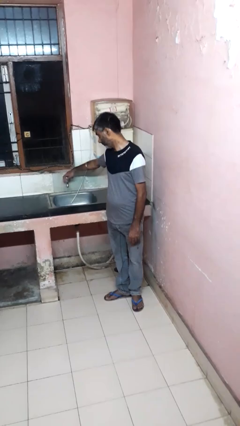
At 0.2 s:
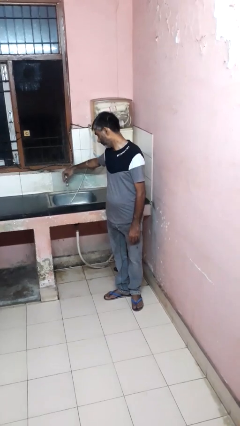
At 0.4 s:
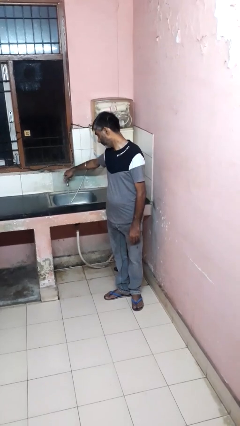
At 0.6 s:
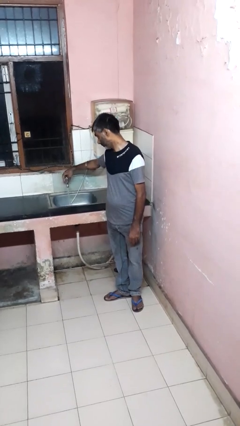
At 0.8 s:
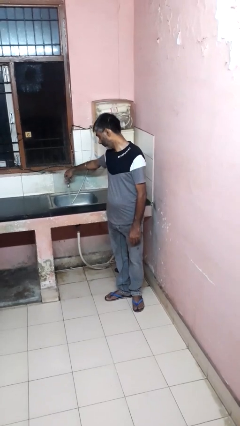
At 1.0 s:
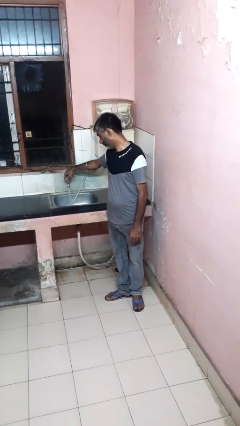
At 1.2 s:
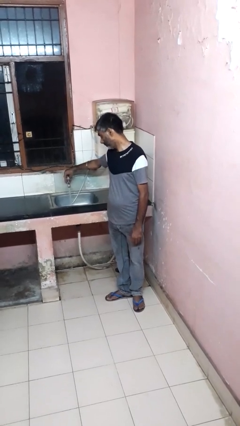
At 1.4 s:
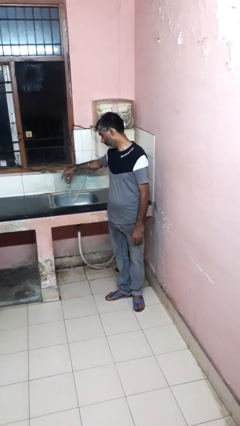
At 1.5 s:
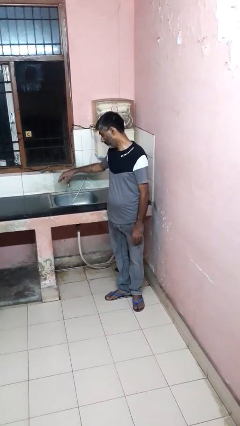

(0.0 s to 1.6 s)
person turns on faucet

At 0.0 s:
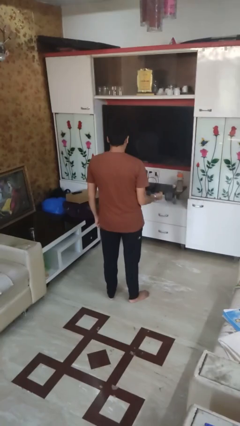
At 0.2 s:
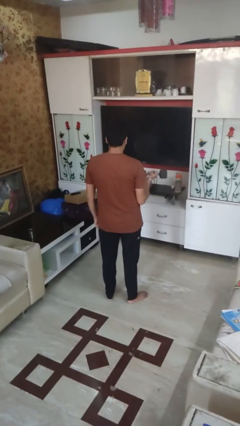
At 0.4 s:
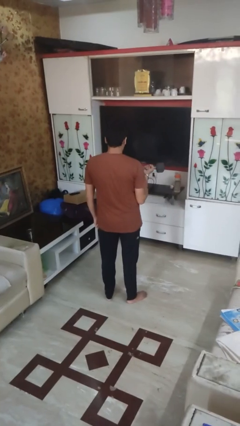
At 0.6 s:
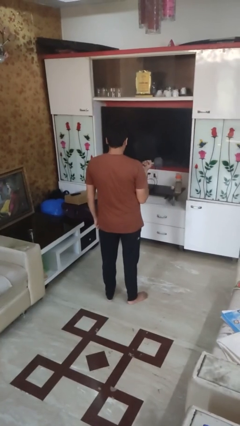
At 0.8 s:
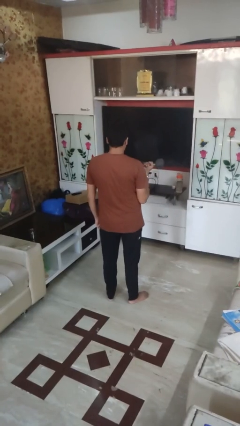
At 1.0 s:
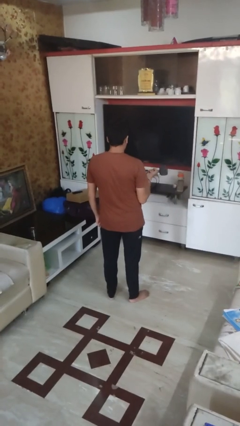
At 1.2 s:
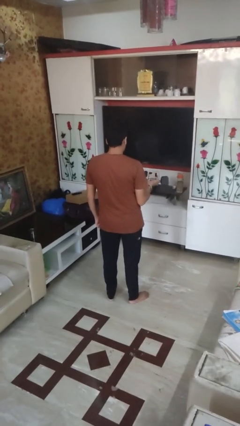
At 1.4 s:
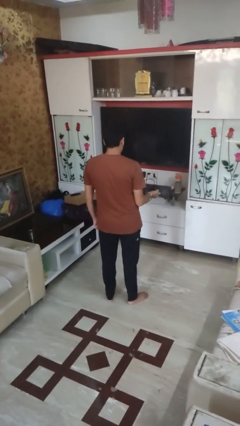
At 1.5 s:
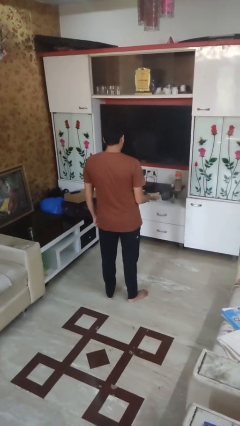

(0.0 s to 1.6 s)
person lifts dumbbells

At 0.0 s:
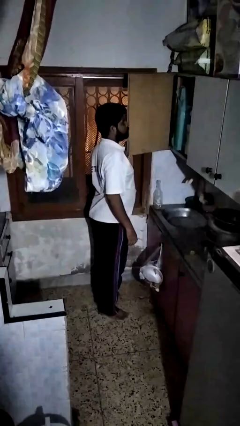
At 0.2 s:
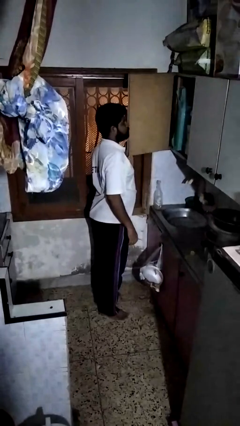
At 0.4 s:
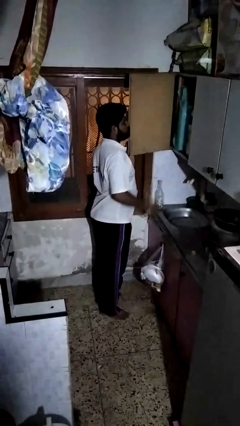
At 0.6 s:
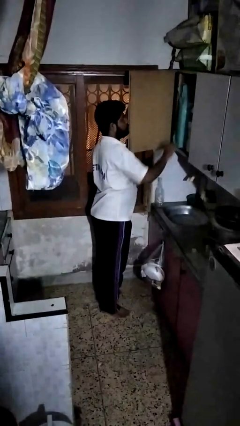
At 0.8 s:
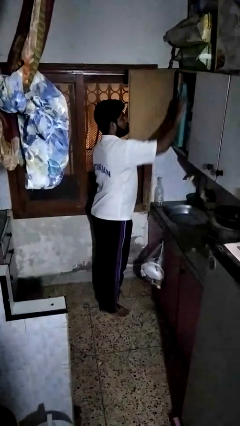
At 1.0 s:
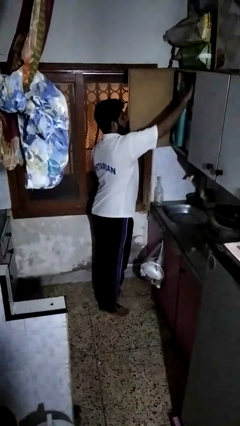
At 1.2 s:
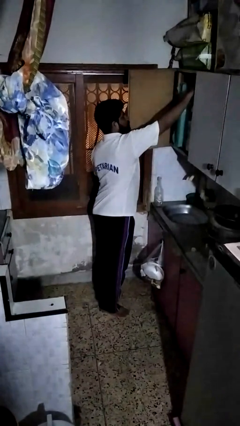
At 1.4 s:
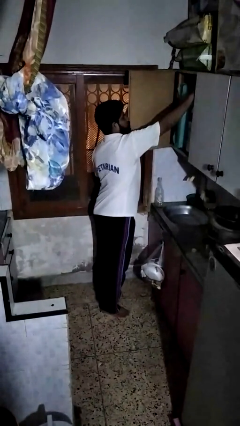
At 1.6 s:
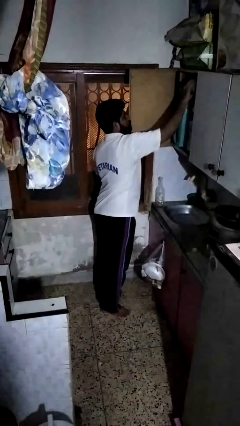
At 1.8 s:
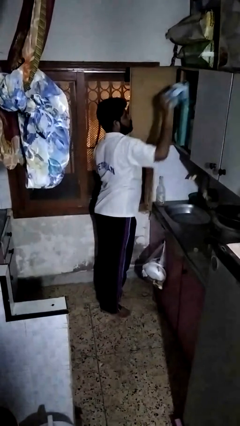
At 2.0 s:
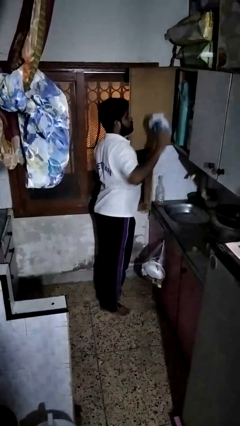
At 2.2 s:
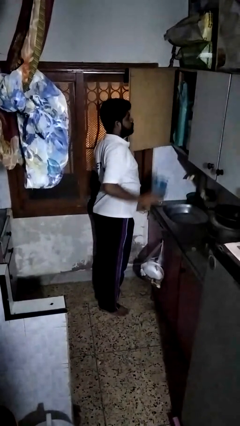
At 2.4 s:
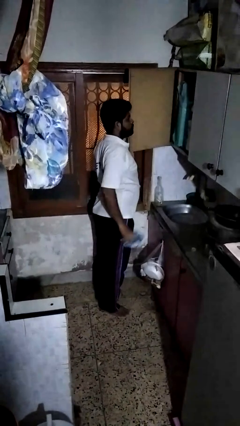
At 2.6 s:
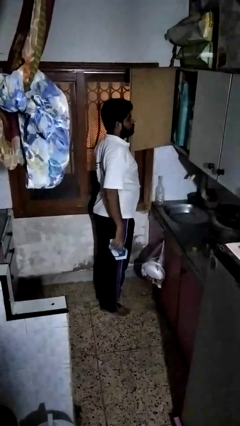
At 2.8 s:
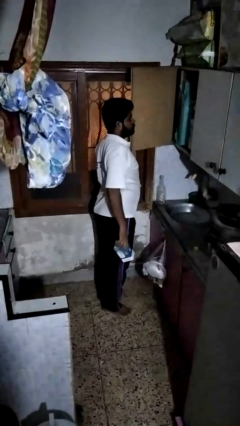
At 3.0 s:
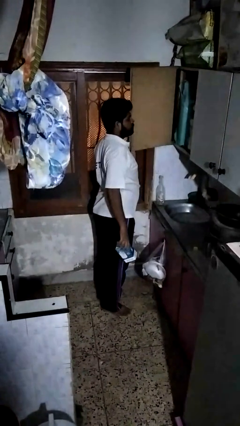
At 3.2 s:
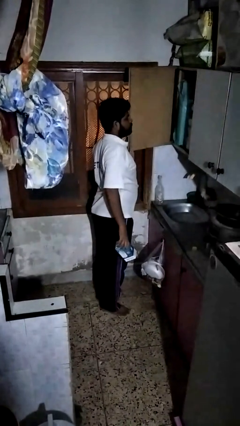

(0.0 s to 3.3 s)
person picks up object from cabinet

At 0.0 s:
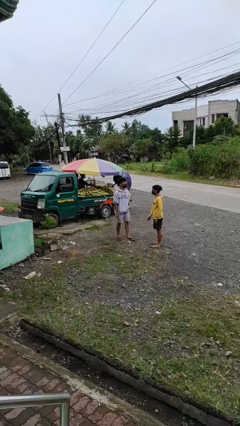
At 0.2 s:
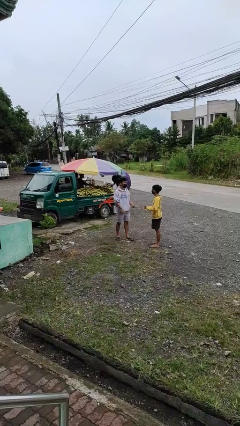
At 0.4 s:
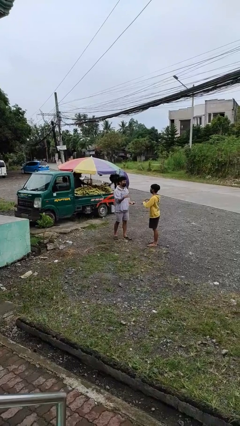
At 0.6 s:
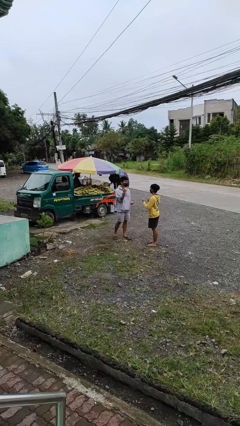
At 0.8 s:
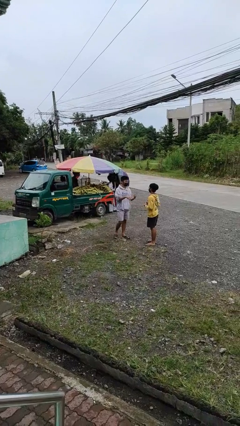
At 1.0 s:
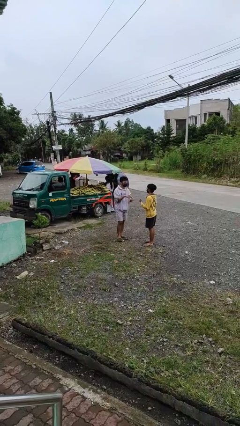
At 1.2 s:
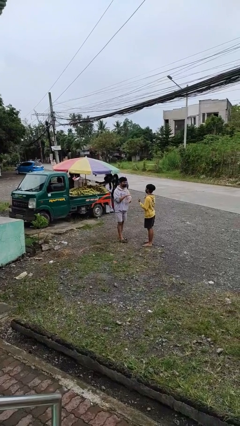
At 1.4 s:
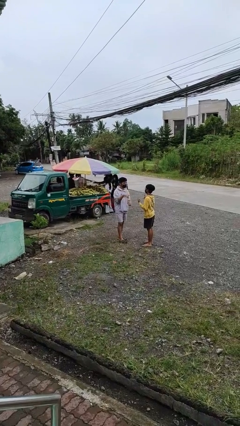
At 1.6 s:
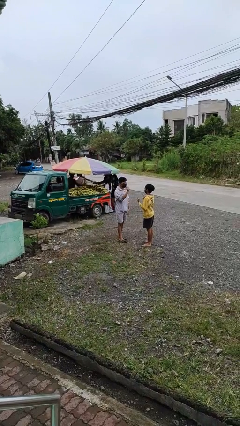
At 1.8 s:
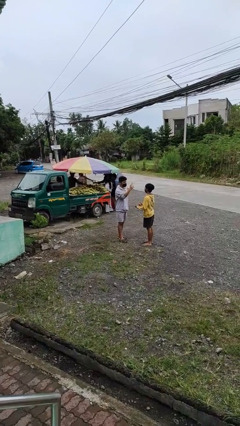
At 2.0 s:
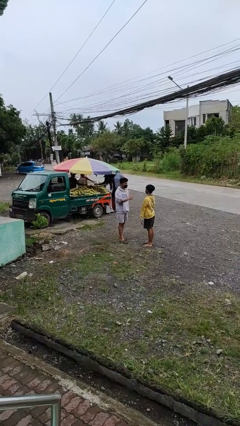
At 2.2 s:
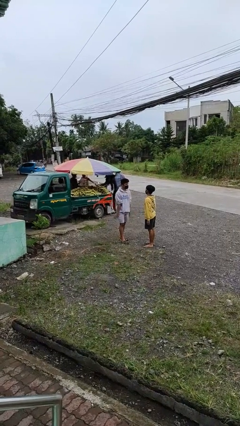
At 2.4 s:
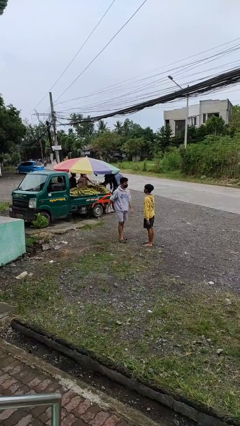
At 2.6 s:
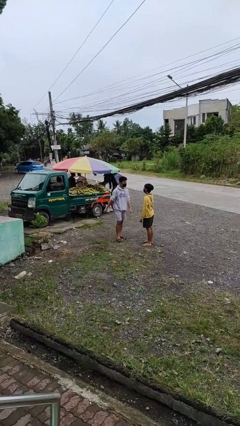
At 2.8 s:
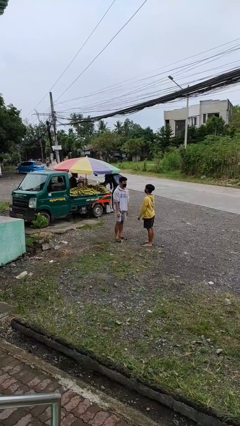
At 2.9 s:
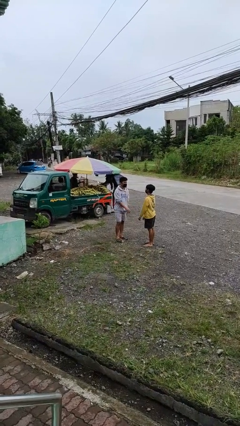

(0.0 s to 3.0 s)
person talks to person

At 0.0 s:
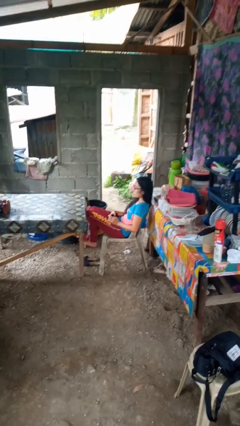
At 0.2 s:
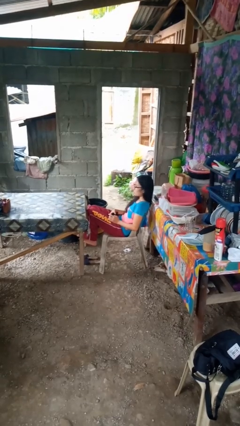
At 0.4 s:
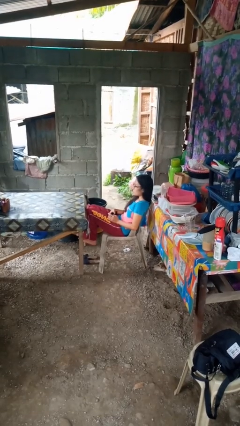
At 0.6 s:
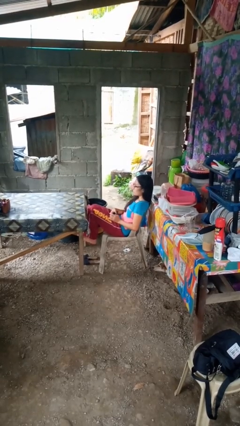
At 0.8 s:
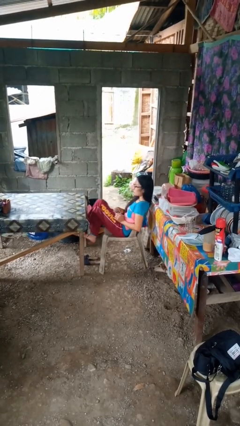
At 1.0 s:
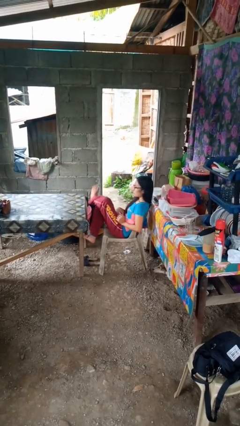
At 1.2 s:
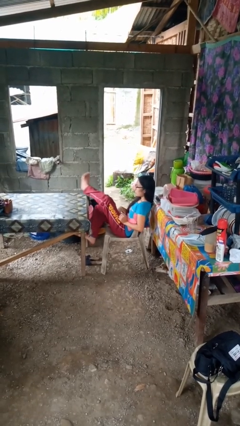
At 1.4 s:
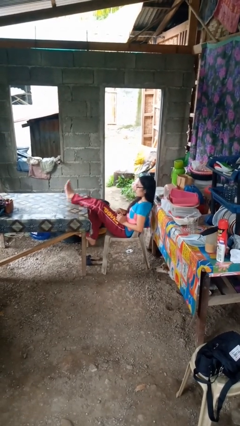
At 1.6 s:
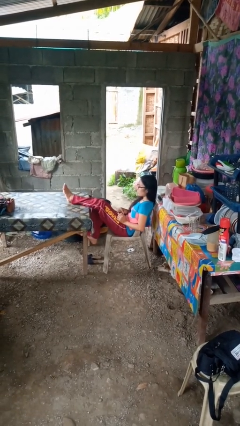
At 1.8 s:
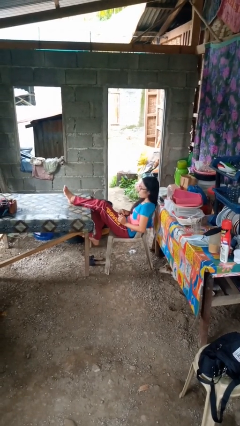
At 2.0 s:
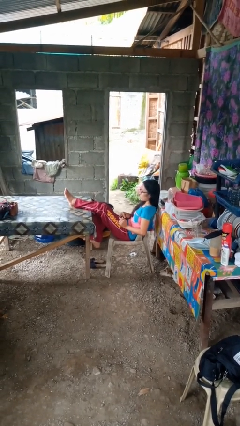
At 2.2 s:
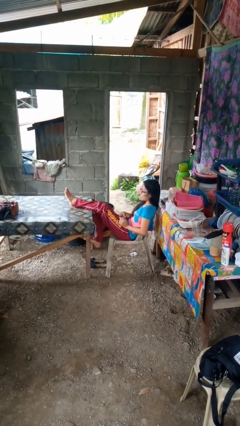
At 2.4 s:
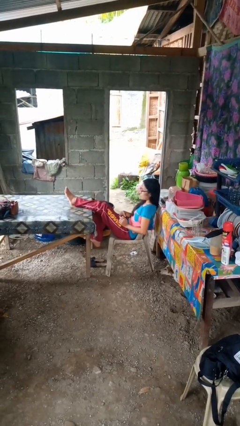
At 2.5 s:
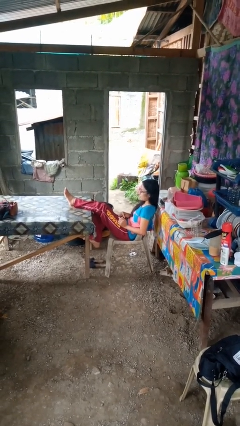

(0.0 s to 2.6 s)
person puts feet up

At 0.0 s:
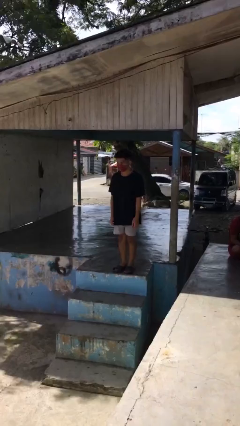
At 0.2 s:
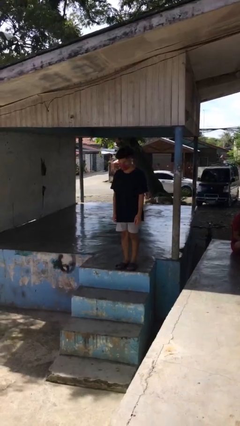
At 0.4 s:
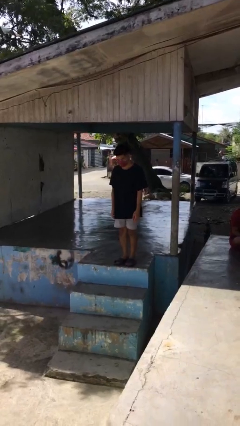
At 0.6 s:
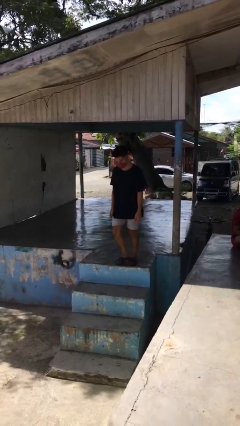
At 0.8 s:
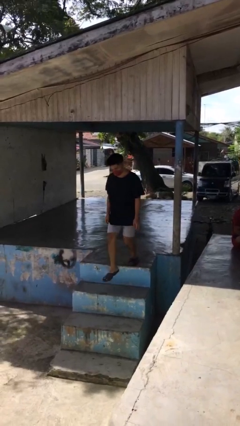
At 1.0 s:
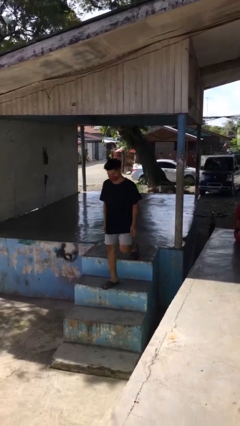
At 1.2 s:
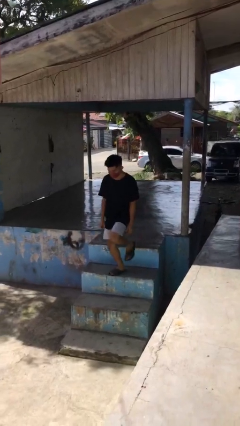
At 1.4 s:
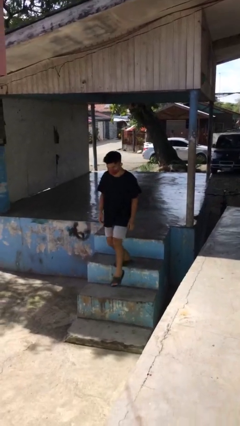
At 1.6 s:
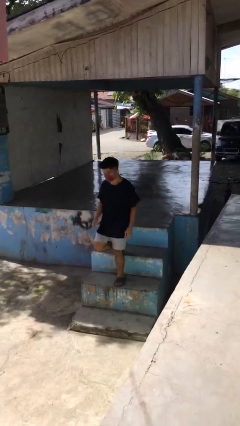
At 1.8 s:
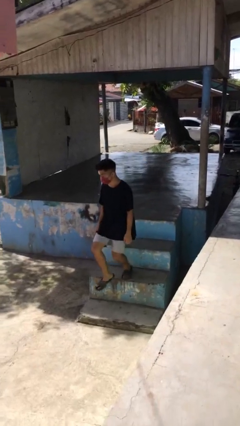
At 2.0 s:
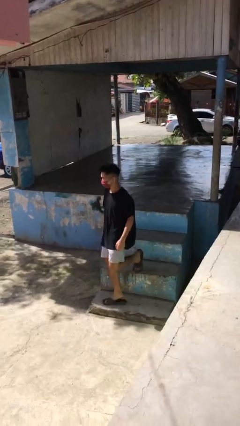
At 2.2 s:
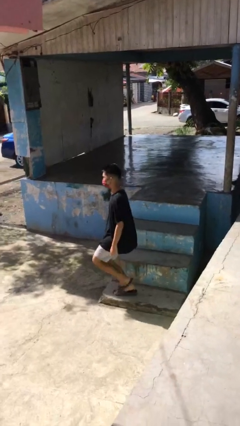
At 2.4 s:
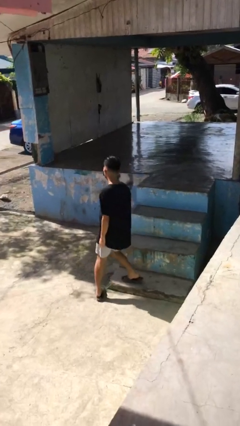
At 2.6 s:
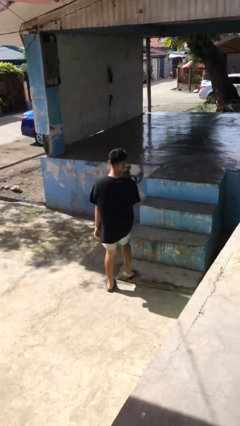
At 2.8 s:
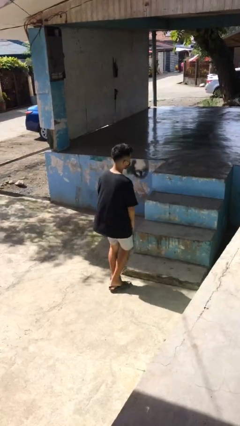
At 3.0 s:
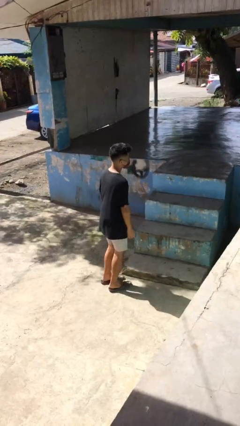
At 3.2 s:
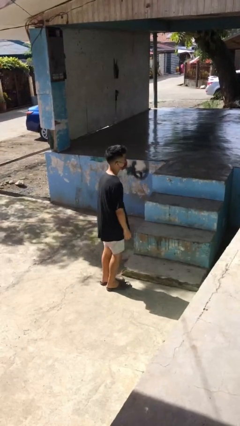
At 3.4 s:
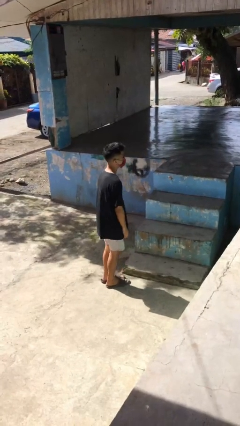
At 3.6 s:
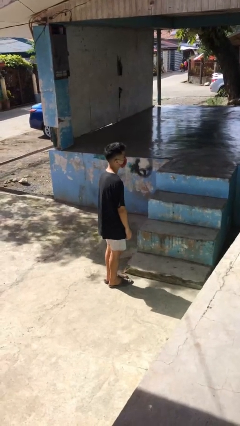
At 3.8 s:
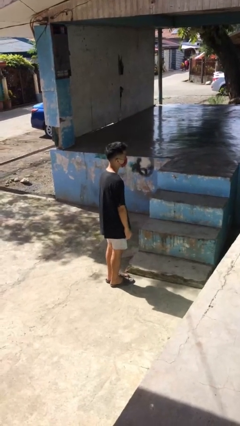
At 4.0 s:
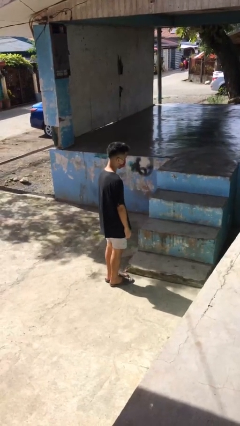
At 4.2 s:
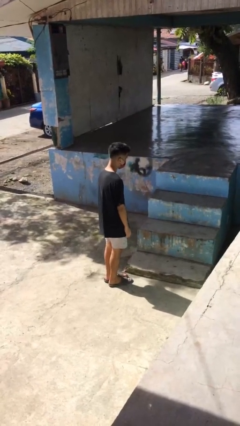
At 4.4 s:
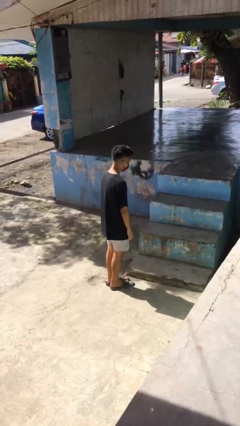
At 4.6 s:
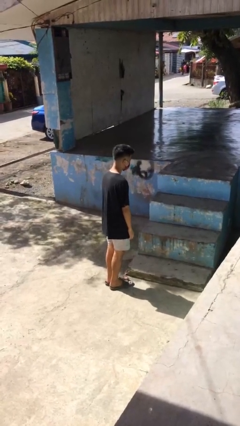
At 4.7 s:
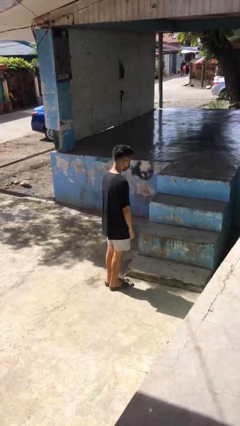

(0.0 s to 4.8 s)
person climbs down stairs

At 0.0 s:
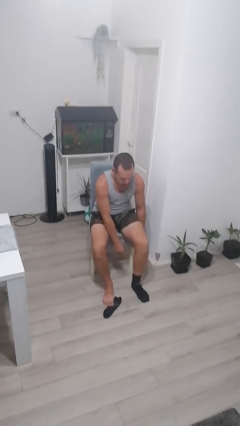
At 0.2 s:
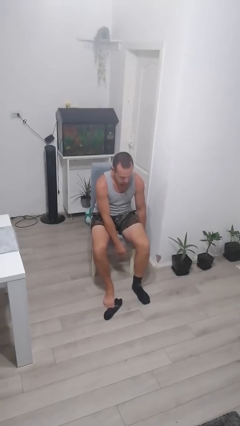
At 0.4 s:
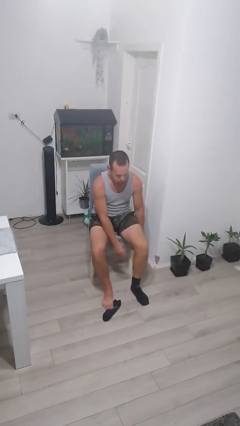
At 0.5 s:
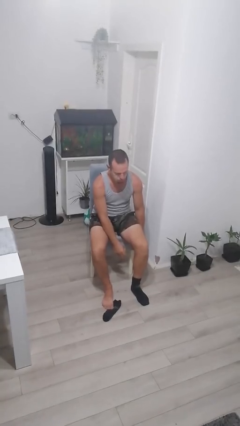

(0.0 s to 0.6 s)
person takes off socks
